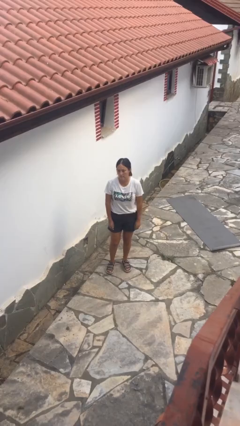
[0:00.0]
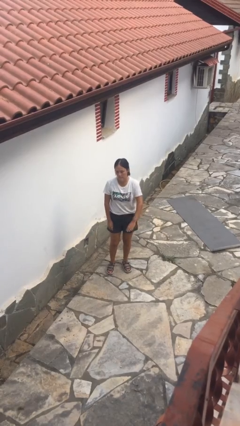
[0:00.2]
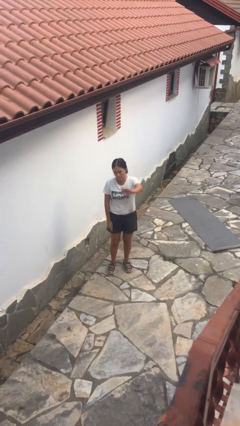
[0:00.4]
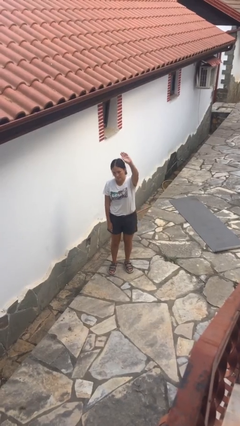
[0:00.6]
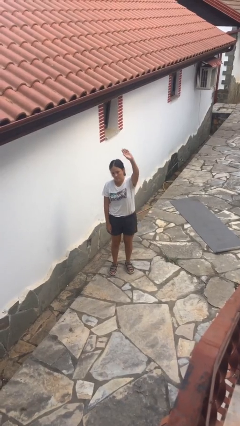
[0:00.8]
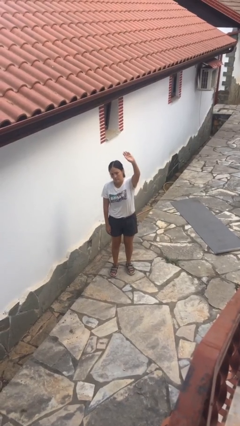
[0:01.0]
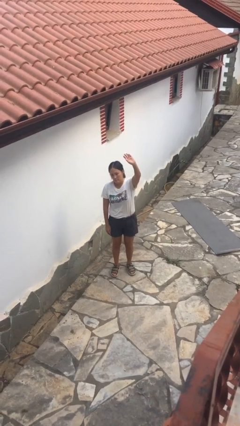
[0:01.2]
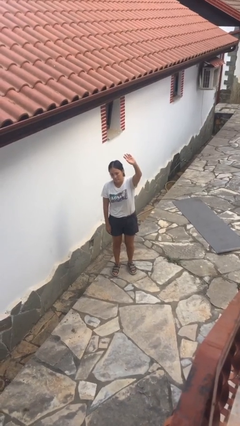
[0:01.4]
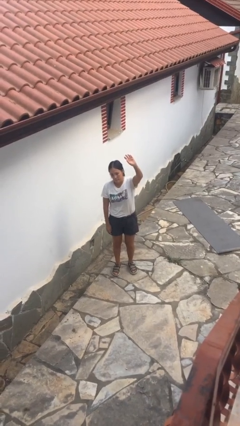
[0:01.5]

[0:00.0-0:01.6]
person gestures swipe up

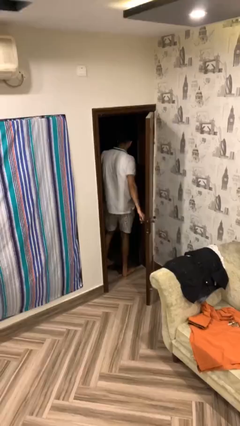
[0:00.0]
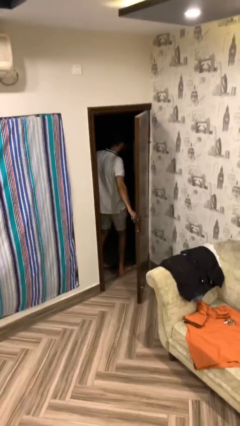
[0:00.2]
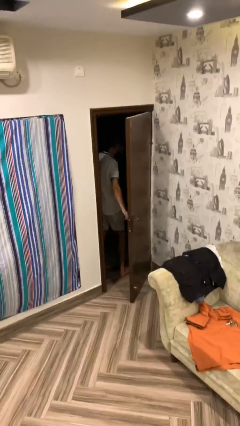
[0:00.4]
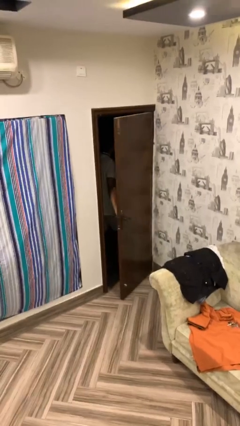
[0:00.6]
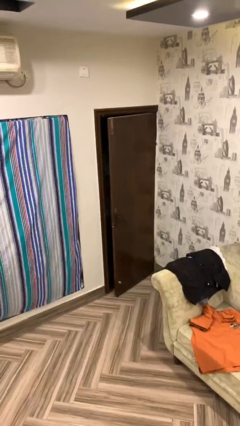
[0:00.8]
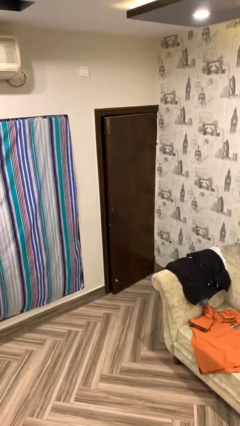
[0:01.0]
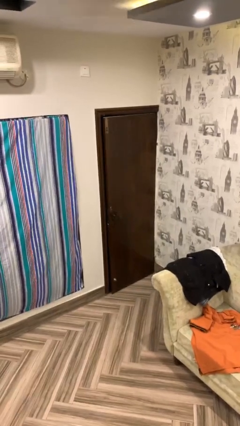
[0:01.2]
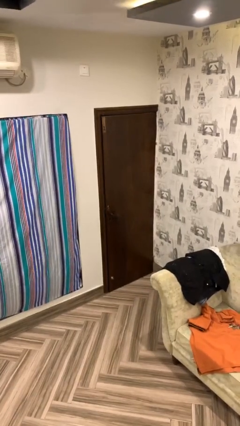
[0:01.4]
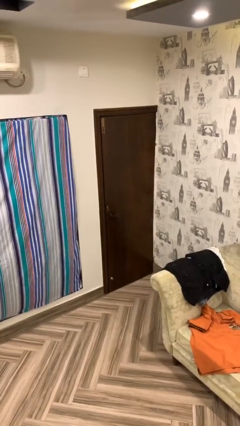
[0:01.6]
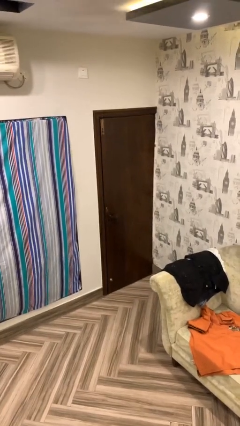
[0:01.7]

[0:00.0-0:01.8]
person closes facility door

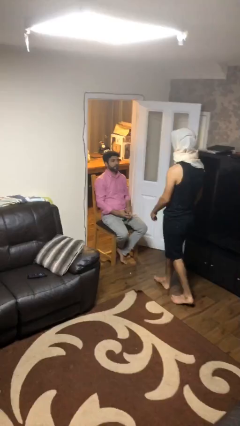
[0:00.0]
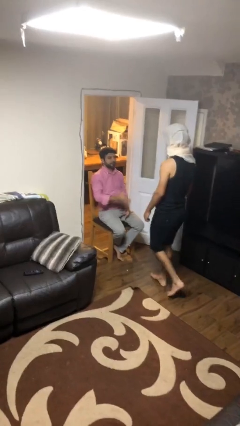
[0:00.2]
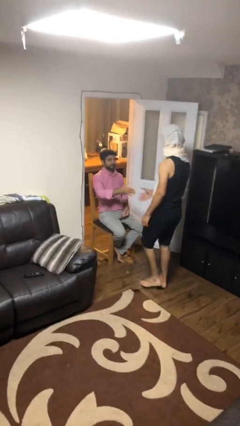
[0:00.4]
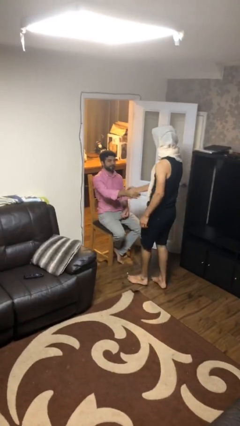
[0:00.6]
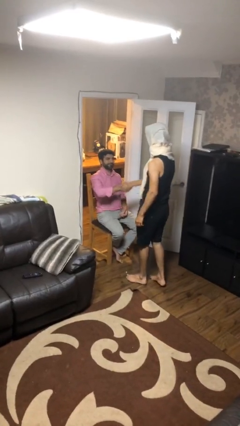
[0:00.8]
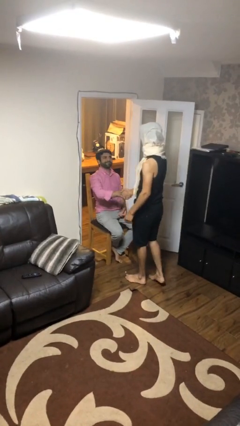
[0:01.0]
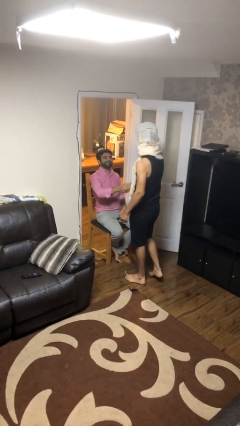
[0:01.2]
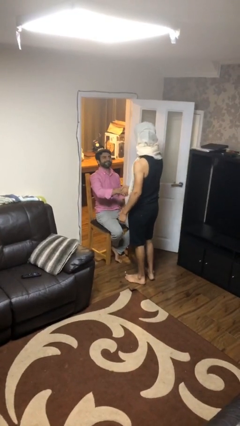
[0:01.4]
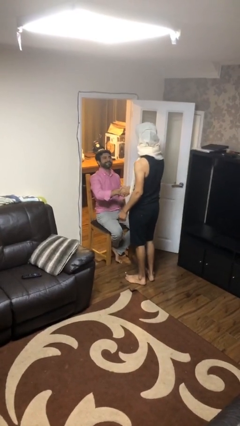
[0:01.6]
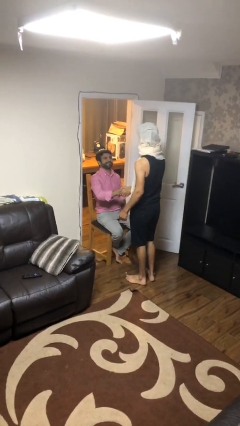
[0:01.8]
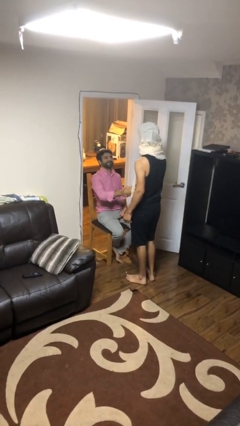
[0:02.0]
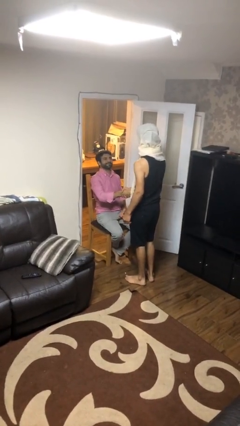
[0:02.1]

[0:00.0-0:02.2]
person shakes hand

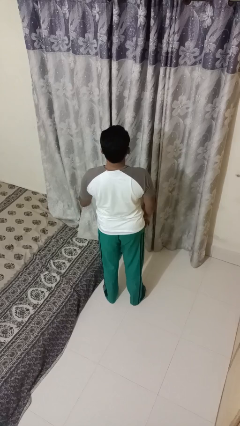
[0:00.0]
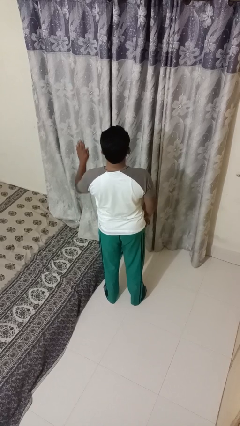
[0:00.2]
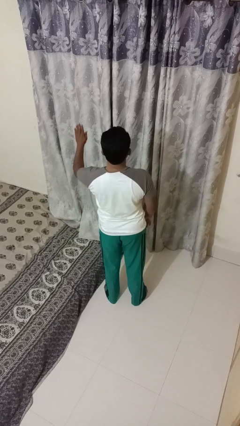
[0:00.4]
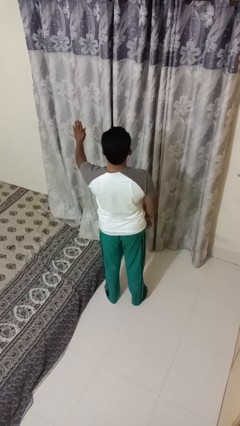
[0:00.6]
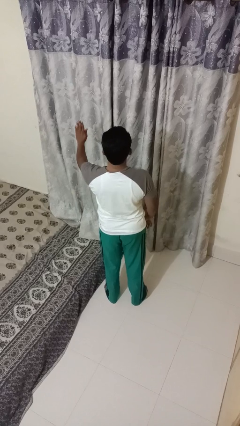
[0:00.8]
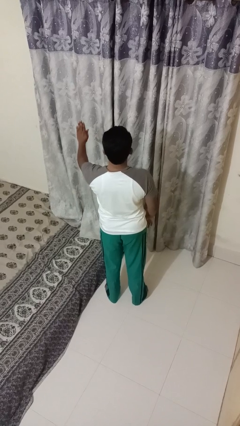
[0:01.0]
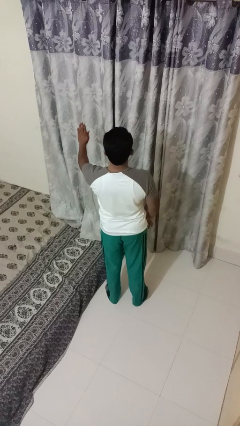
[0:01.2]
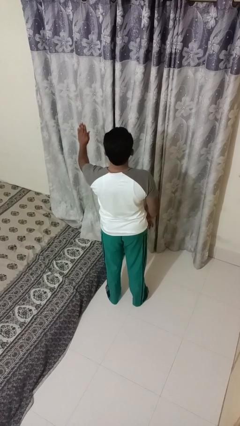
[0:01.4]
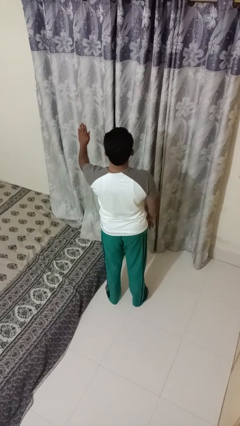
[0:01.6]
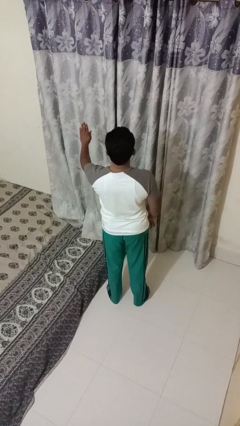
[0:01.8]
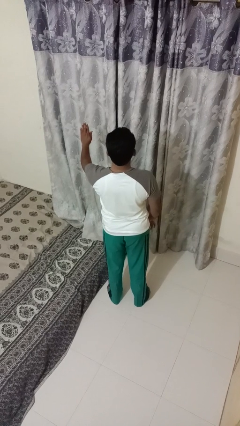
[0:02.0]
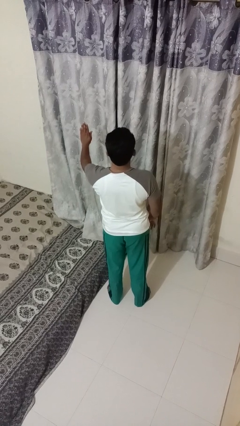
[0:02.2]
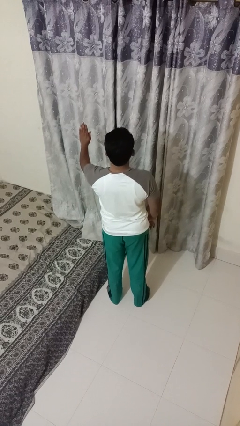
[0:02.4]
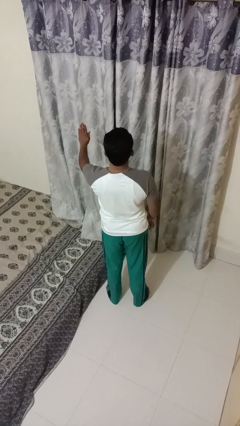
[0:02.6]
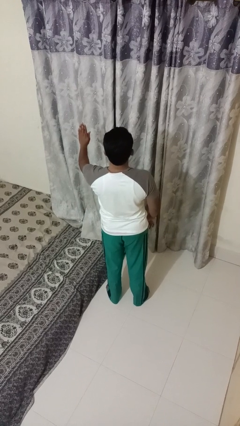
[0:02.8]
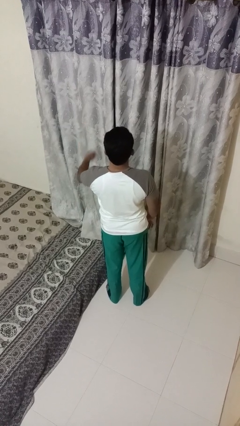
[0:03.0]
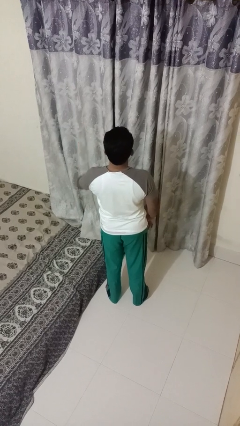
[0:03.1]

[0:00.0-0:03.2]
person gestures stop

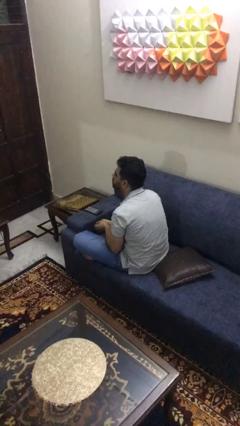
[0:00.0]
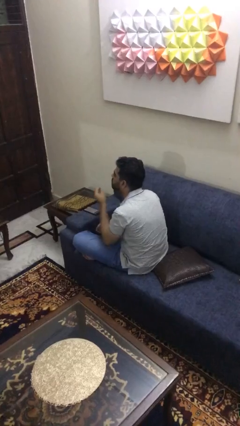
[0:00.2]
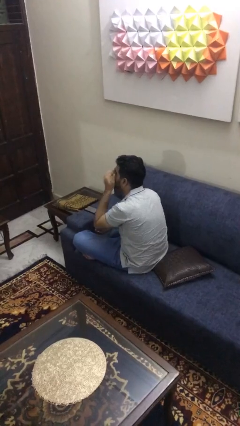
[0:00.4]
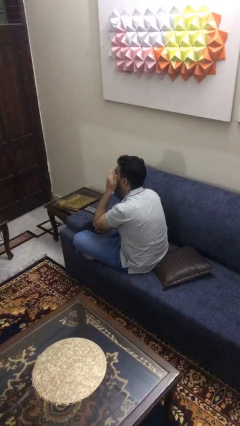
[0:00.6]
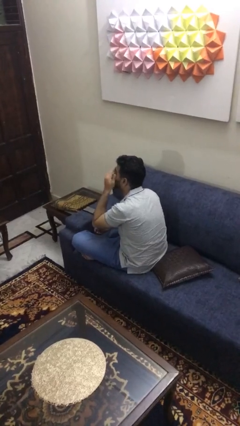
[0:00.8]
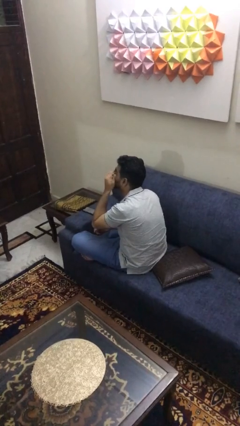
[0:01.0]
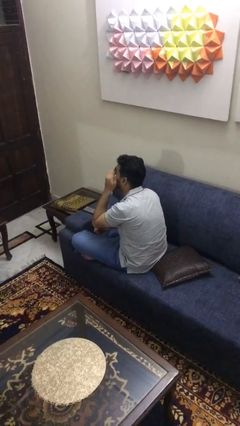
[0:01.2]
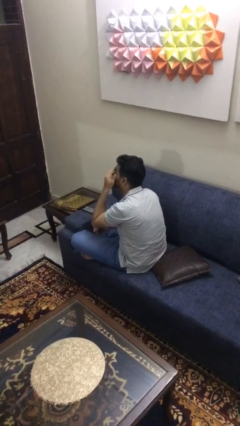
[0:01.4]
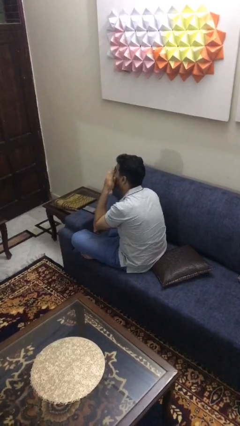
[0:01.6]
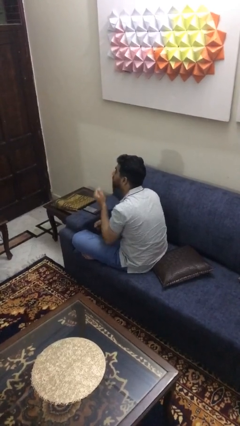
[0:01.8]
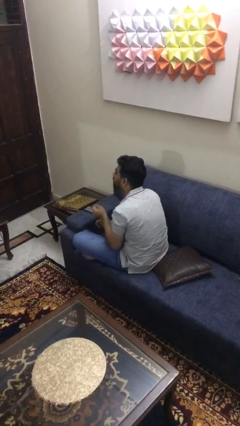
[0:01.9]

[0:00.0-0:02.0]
person rubs eyes

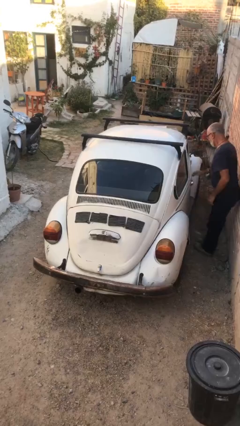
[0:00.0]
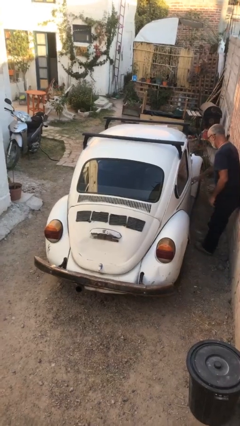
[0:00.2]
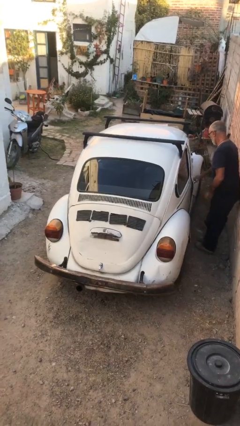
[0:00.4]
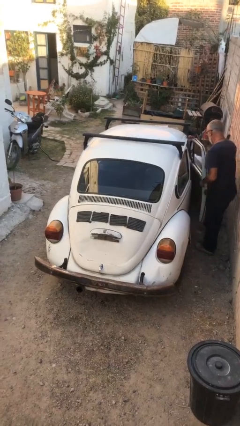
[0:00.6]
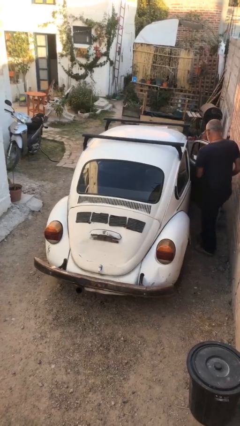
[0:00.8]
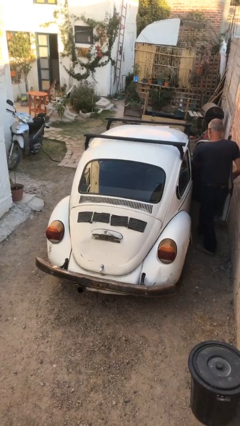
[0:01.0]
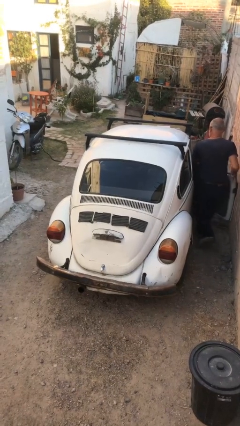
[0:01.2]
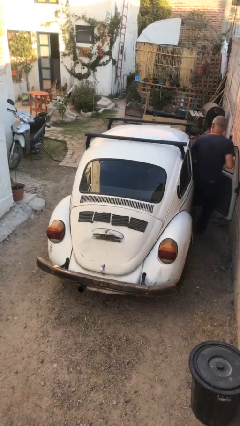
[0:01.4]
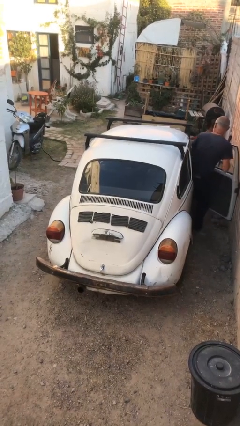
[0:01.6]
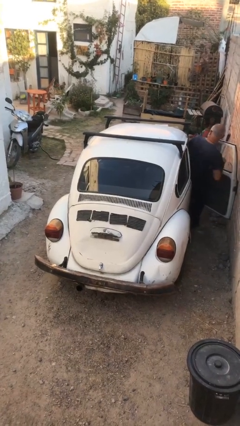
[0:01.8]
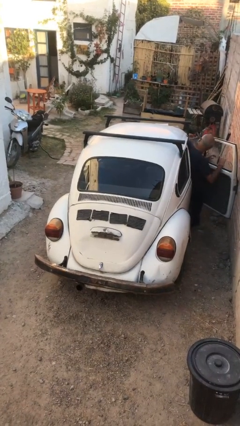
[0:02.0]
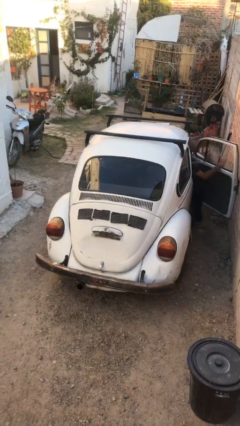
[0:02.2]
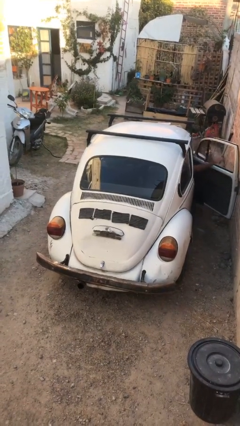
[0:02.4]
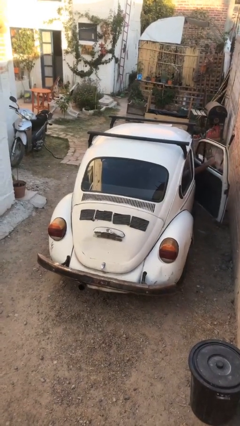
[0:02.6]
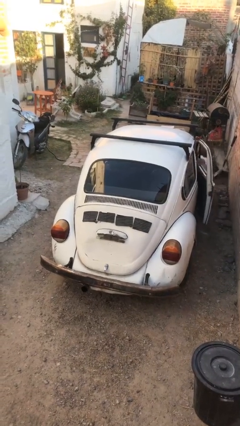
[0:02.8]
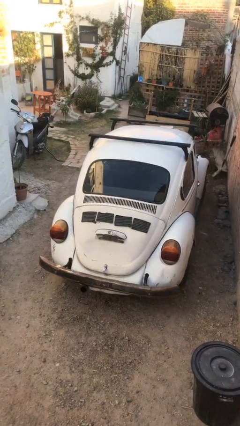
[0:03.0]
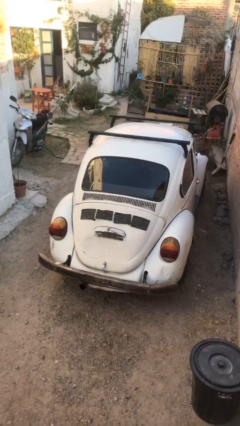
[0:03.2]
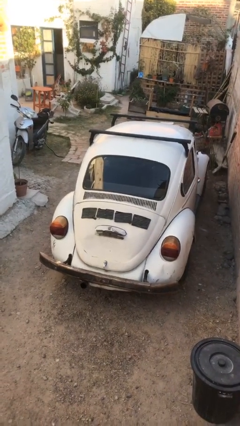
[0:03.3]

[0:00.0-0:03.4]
car picks up person

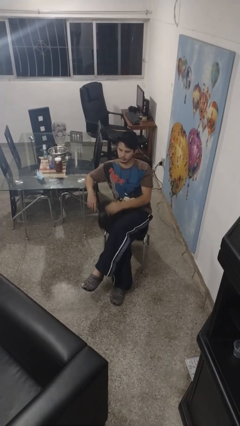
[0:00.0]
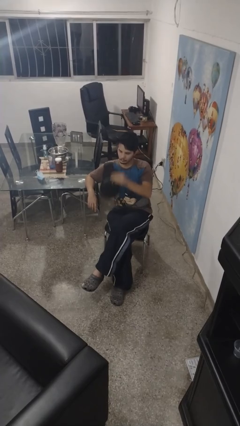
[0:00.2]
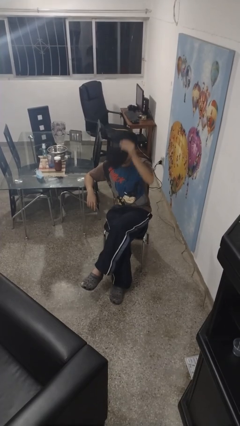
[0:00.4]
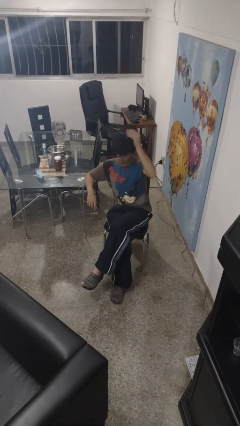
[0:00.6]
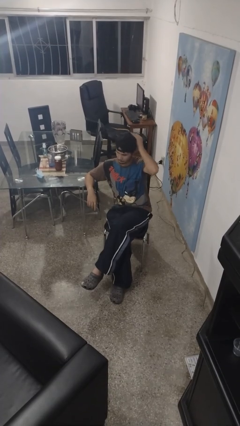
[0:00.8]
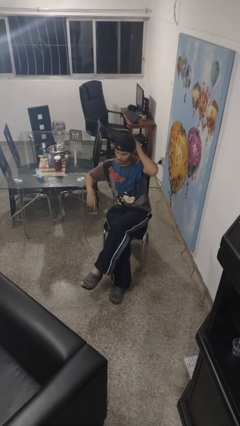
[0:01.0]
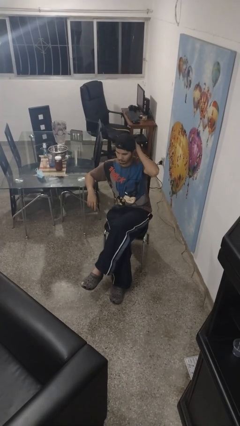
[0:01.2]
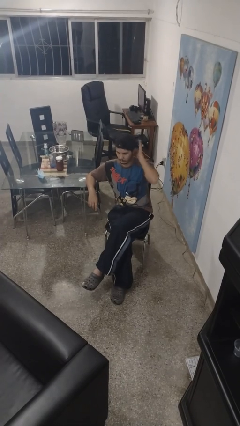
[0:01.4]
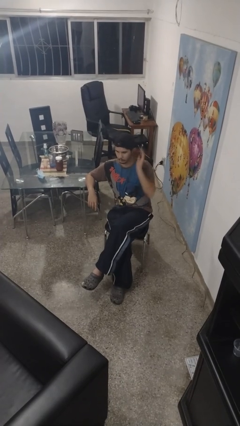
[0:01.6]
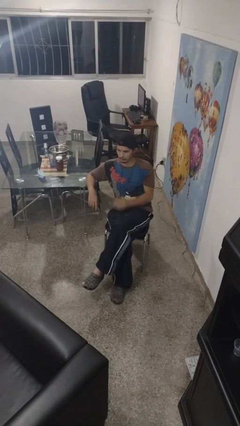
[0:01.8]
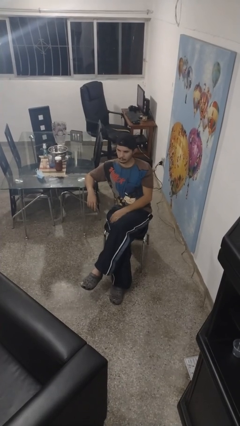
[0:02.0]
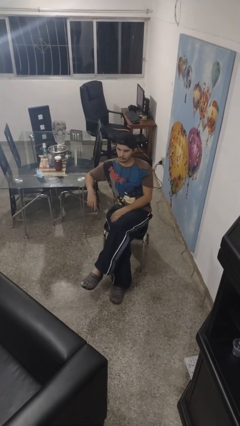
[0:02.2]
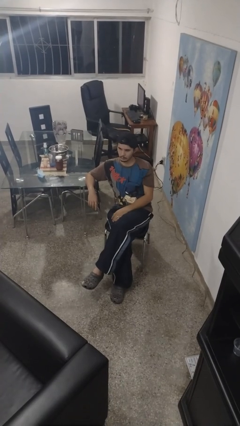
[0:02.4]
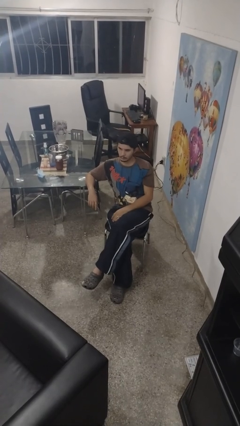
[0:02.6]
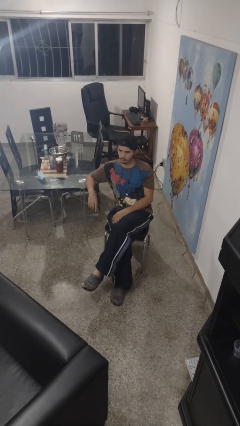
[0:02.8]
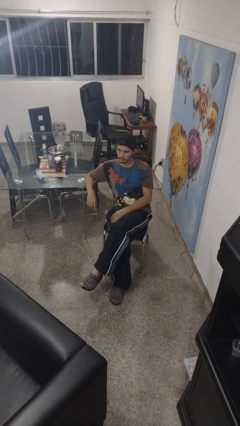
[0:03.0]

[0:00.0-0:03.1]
person puts on hat
